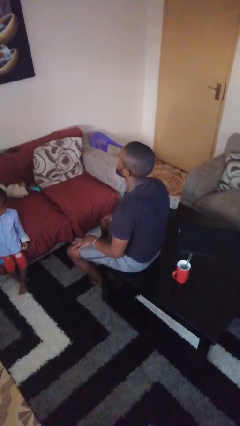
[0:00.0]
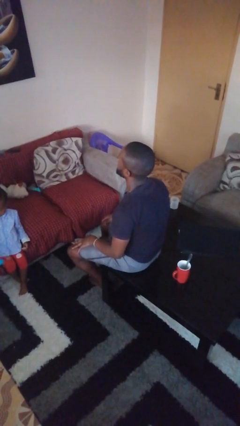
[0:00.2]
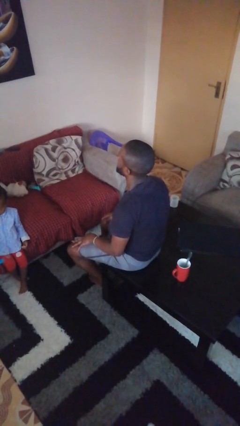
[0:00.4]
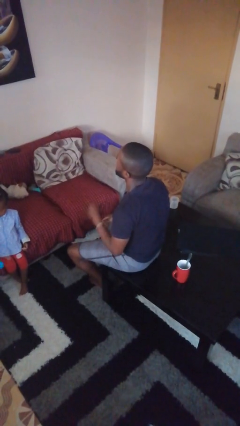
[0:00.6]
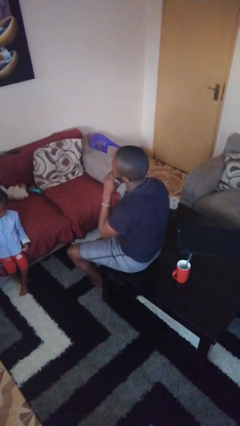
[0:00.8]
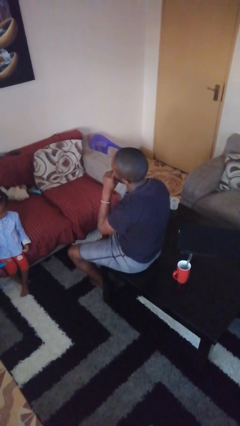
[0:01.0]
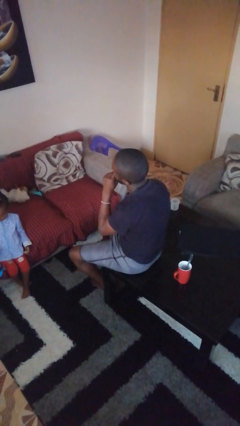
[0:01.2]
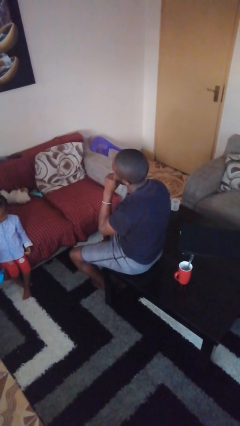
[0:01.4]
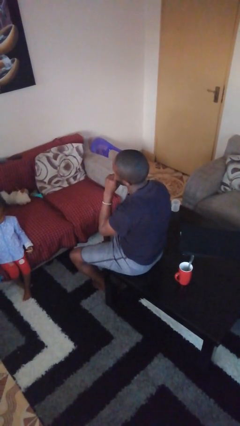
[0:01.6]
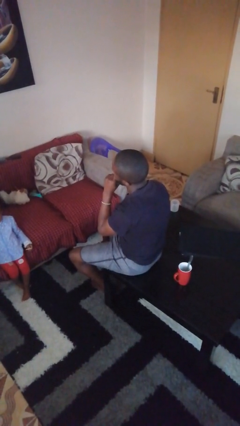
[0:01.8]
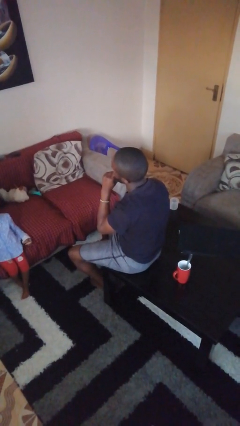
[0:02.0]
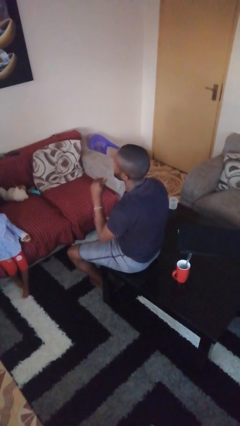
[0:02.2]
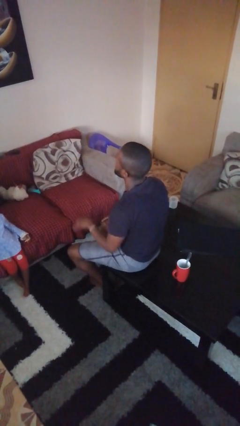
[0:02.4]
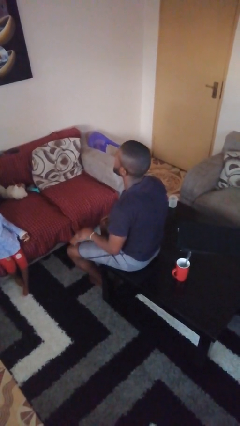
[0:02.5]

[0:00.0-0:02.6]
person strokes chin

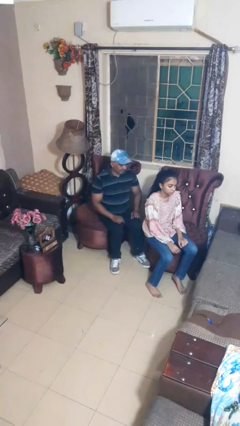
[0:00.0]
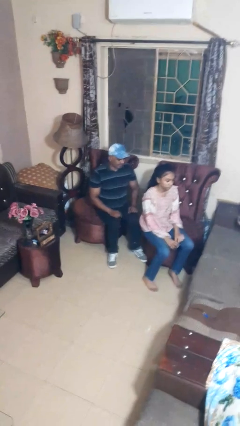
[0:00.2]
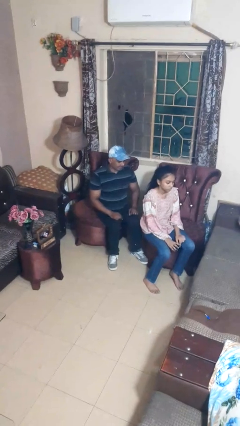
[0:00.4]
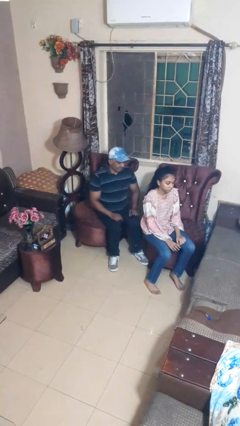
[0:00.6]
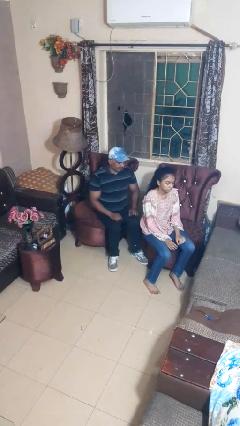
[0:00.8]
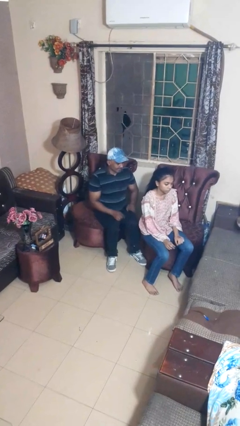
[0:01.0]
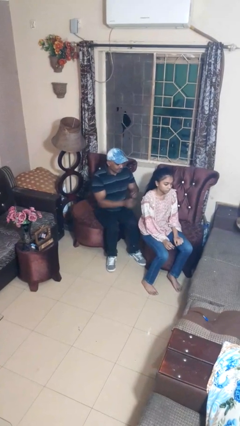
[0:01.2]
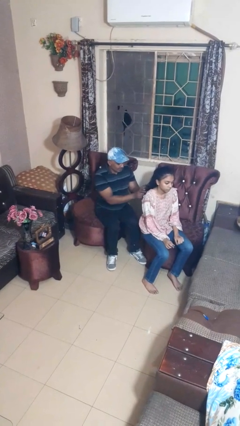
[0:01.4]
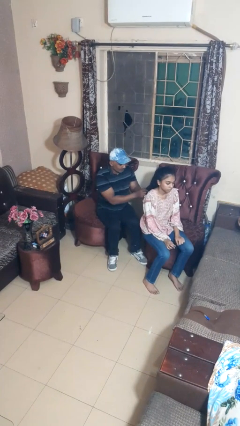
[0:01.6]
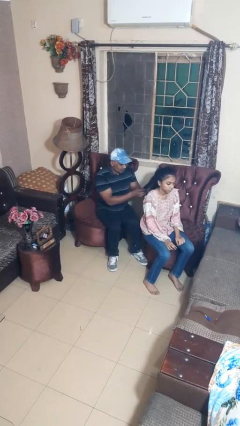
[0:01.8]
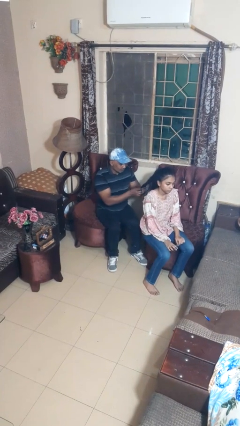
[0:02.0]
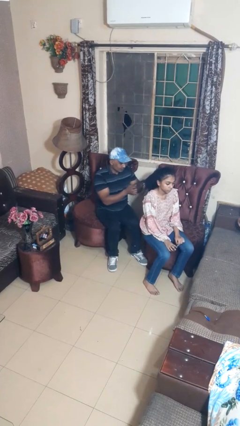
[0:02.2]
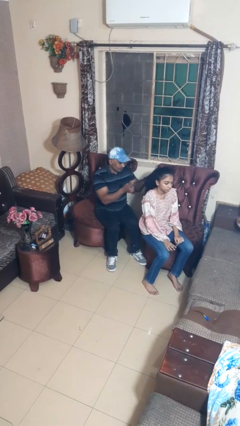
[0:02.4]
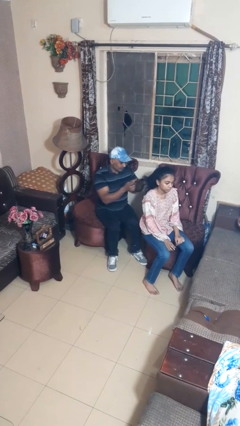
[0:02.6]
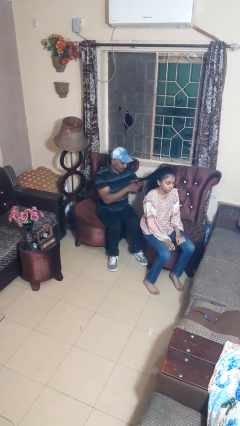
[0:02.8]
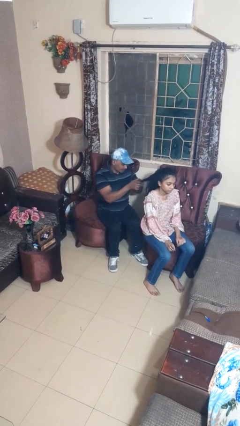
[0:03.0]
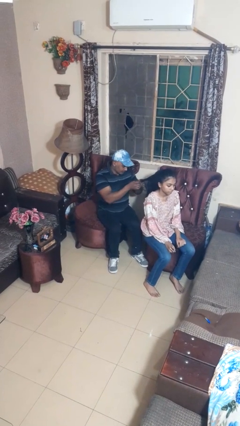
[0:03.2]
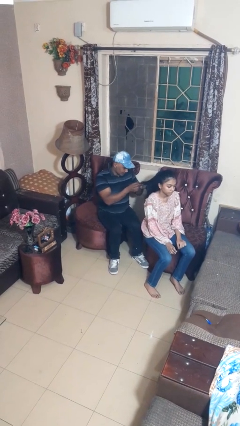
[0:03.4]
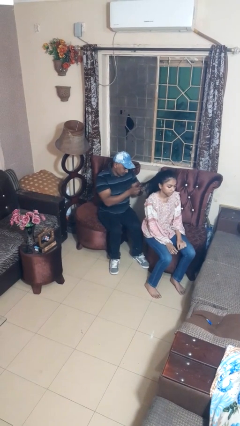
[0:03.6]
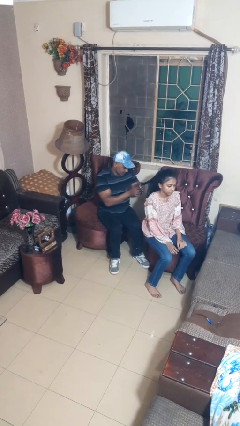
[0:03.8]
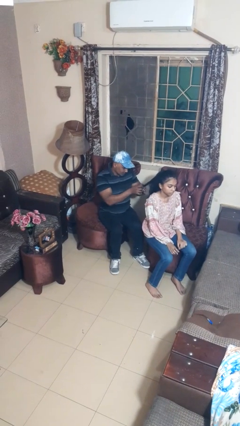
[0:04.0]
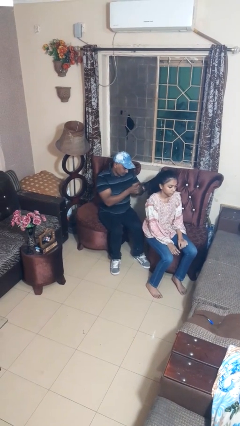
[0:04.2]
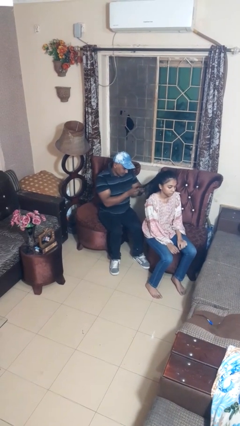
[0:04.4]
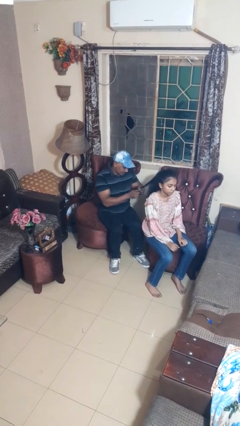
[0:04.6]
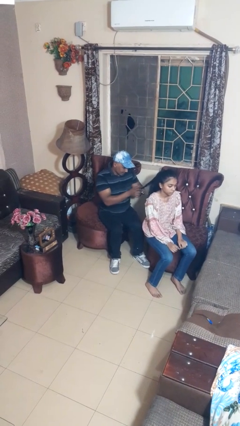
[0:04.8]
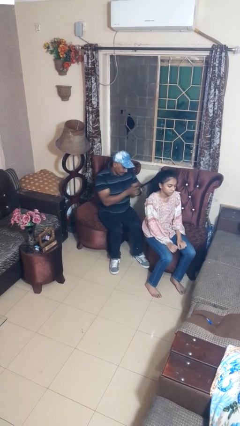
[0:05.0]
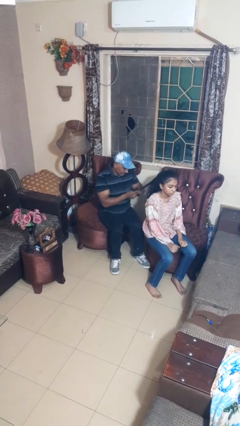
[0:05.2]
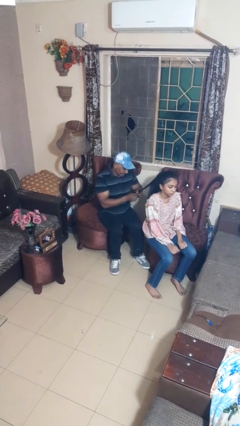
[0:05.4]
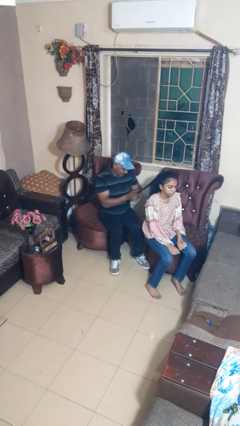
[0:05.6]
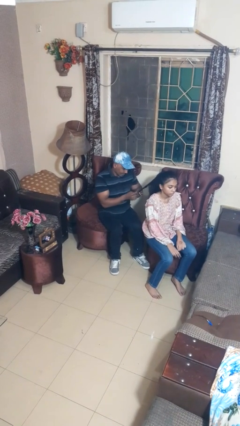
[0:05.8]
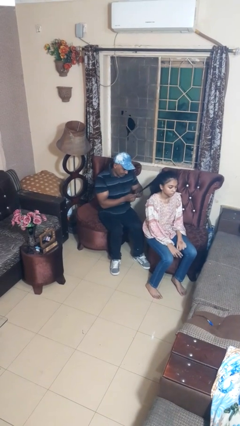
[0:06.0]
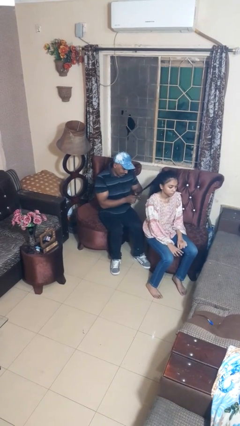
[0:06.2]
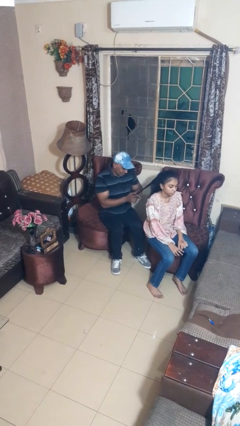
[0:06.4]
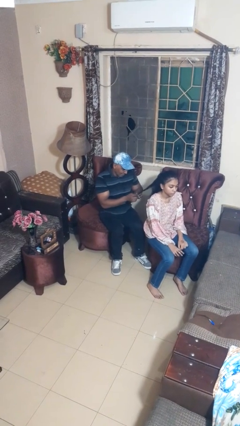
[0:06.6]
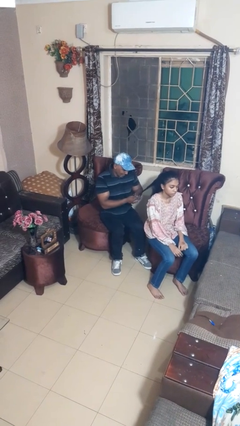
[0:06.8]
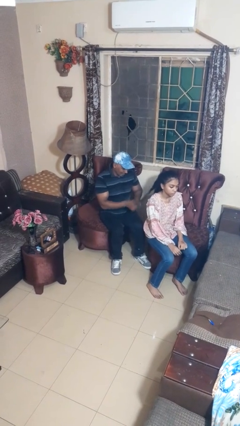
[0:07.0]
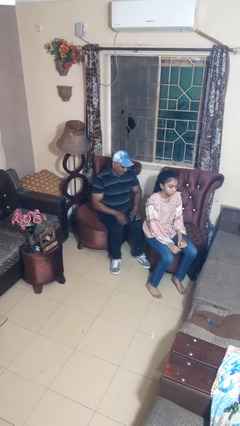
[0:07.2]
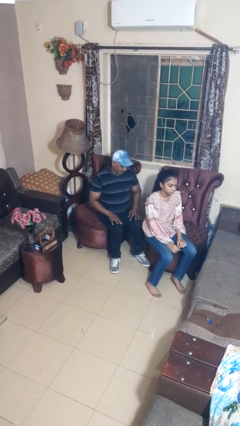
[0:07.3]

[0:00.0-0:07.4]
person braids hair of person

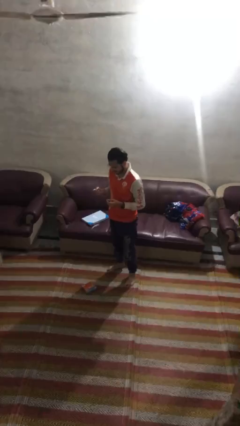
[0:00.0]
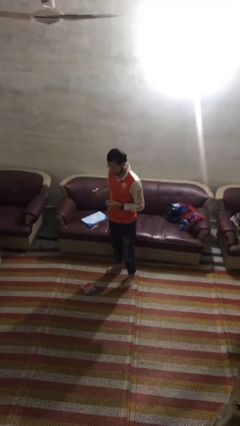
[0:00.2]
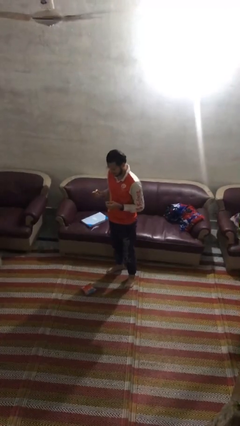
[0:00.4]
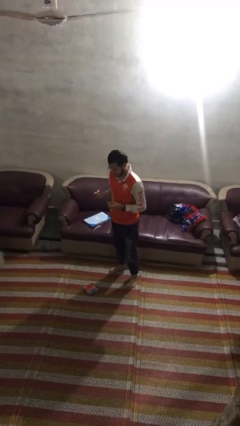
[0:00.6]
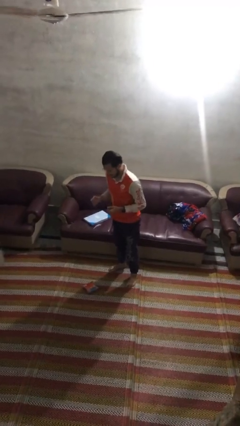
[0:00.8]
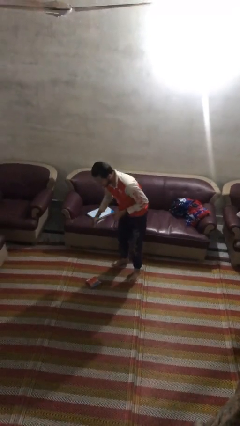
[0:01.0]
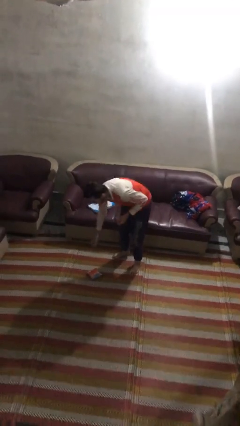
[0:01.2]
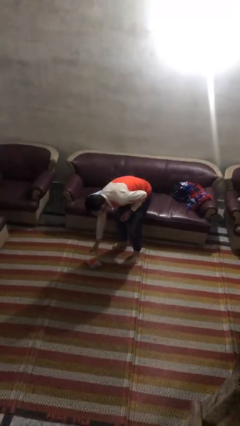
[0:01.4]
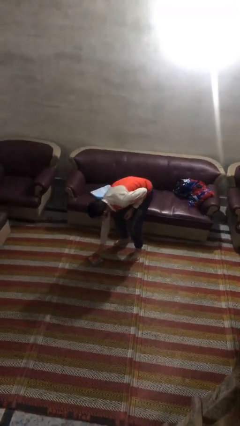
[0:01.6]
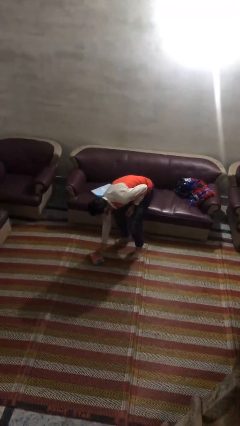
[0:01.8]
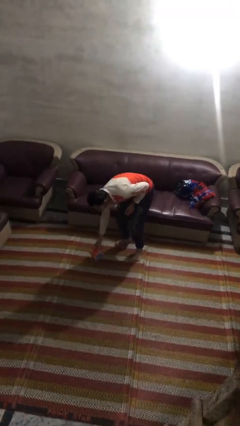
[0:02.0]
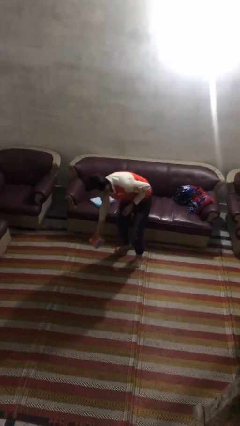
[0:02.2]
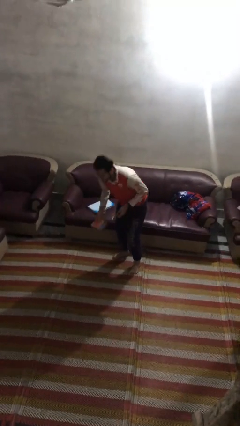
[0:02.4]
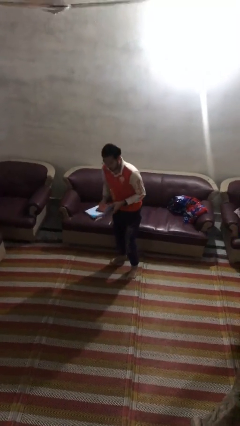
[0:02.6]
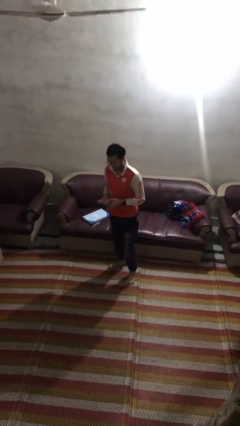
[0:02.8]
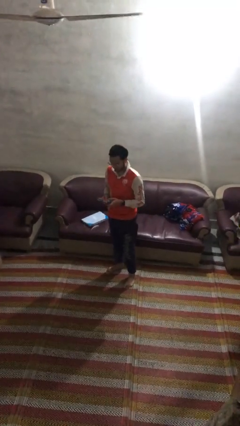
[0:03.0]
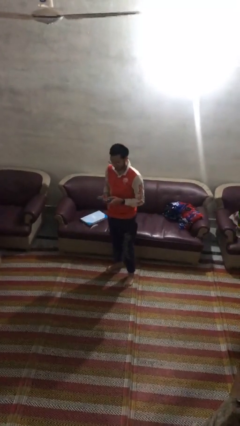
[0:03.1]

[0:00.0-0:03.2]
person picks up object from floor

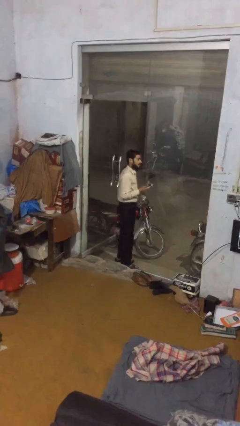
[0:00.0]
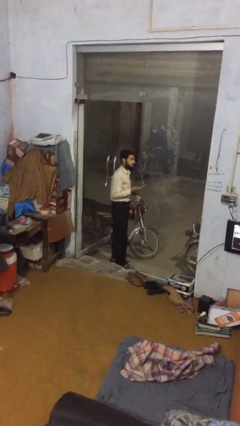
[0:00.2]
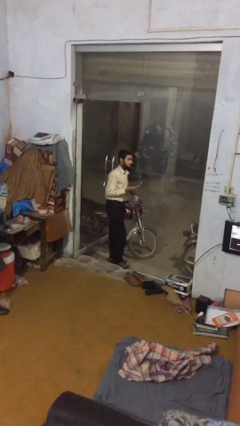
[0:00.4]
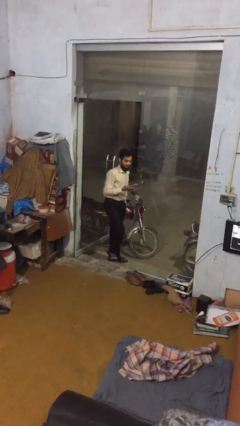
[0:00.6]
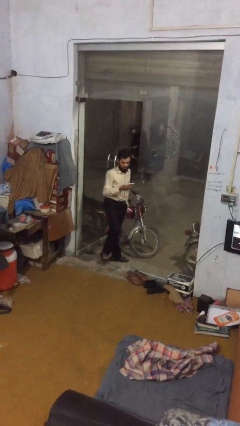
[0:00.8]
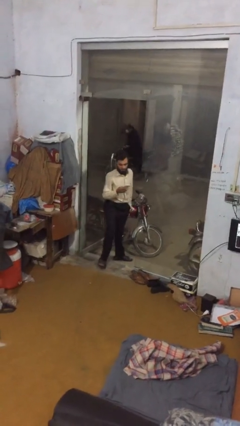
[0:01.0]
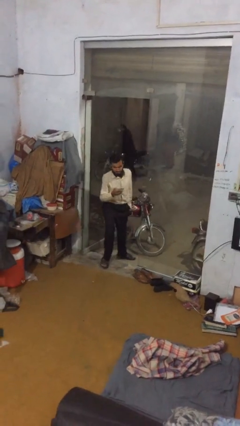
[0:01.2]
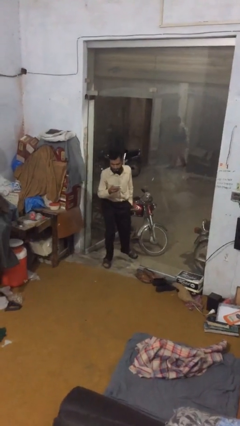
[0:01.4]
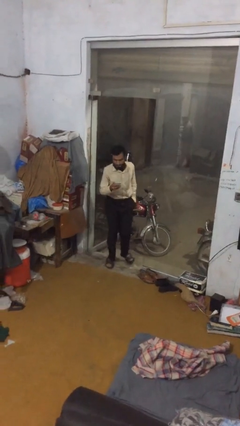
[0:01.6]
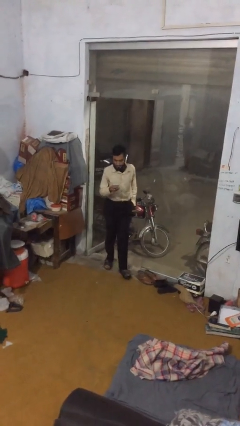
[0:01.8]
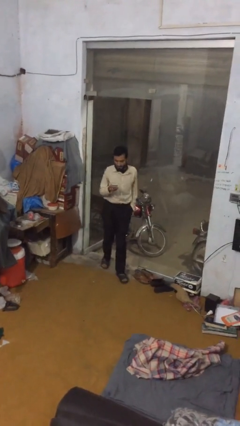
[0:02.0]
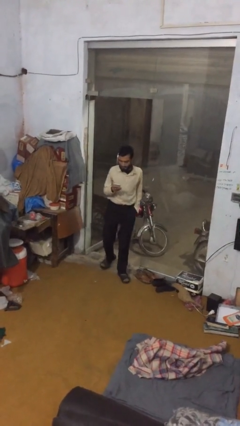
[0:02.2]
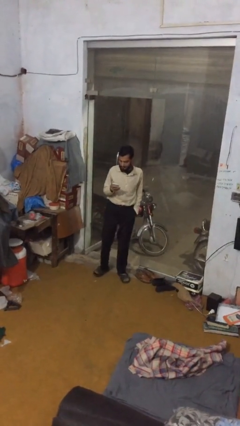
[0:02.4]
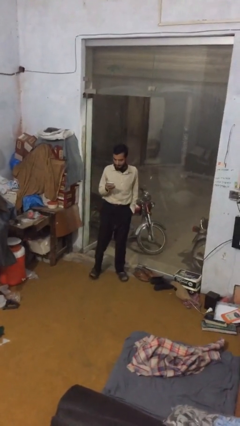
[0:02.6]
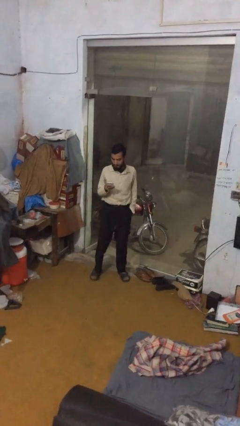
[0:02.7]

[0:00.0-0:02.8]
person enters scene through structure

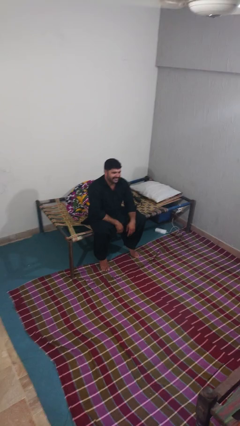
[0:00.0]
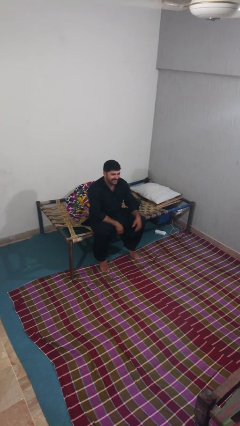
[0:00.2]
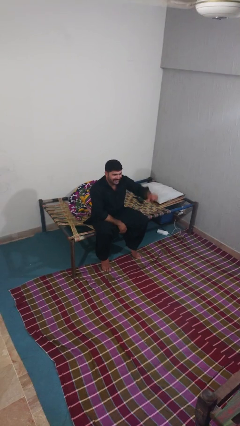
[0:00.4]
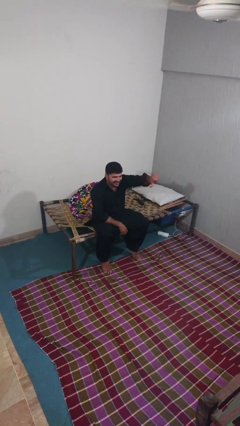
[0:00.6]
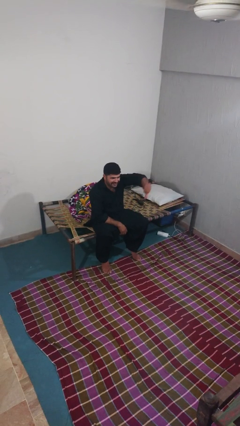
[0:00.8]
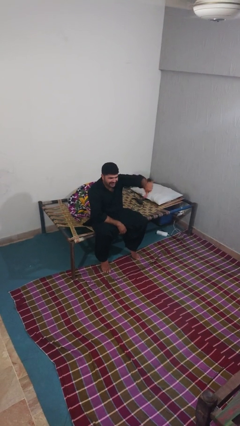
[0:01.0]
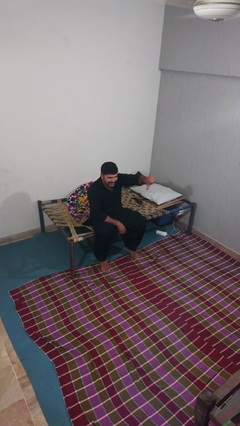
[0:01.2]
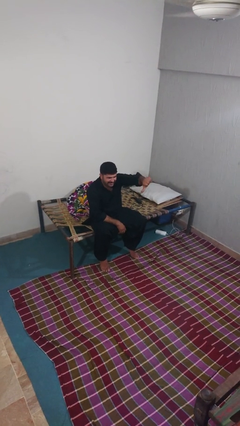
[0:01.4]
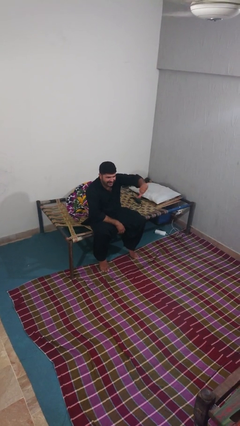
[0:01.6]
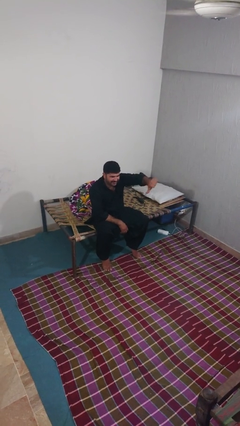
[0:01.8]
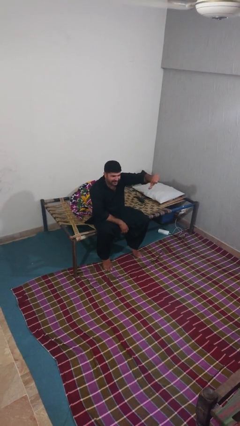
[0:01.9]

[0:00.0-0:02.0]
person gestures thumbs down
